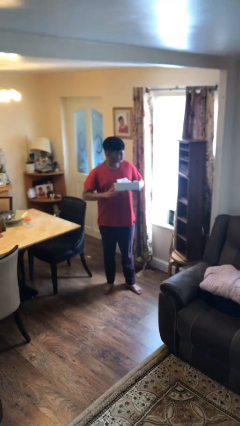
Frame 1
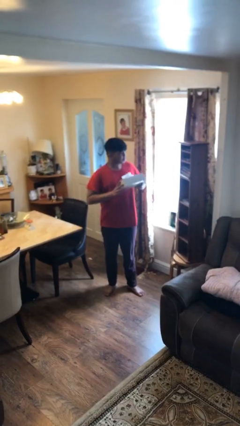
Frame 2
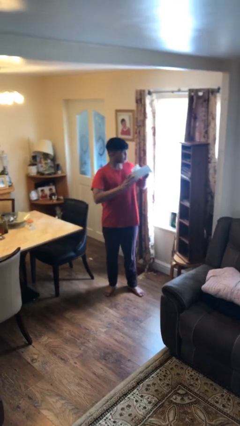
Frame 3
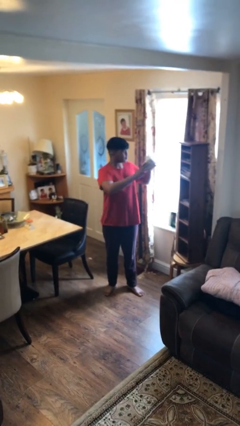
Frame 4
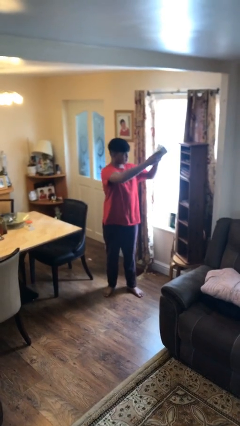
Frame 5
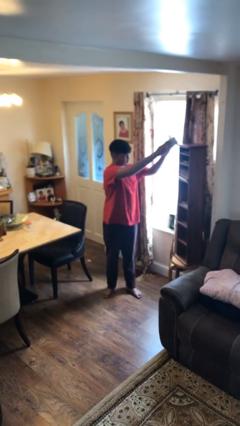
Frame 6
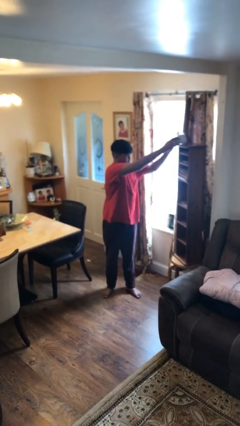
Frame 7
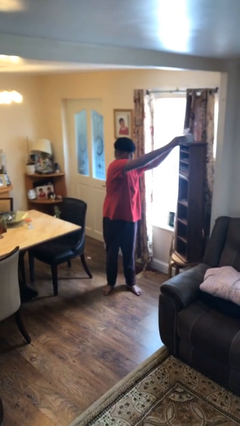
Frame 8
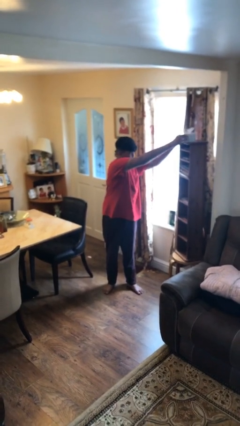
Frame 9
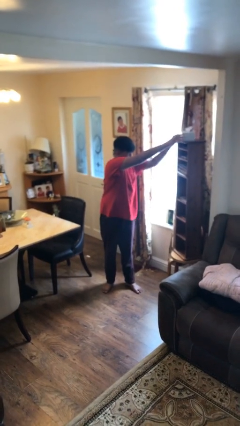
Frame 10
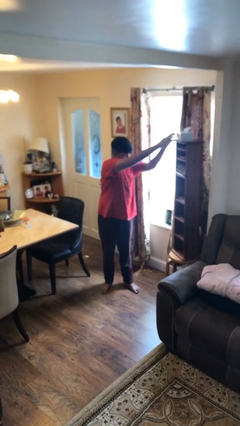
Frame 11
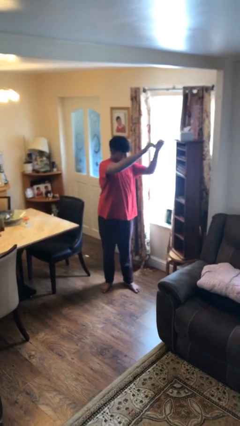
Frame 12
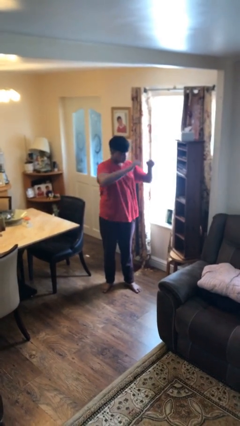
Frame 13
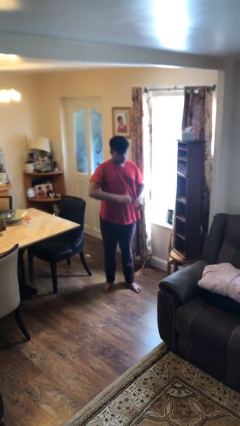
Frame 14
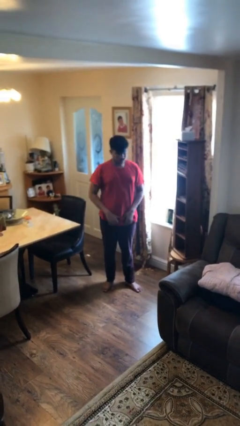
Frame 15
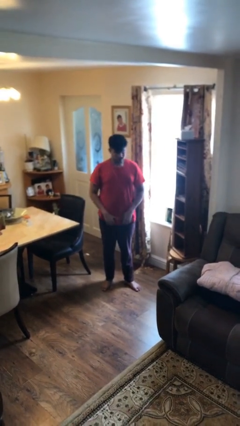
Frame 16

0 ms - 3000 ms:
person puts down object on shelf

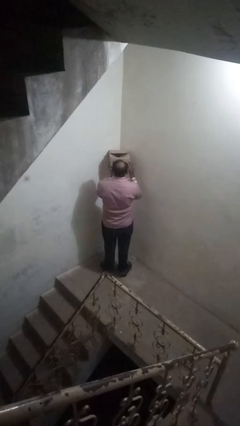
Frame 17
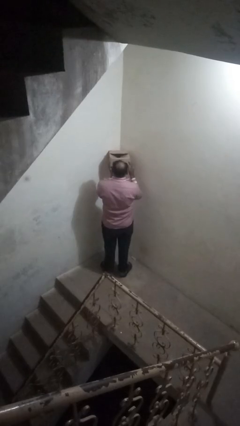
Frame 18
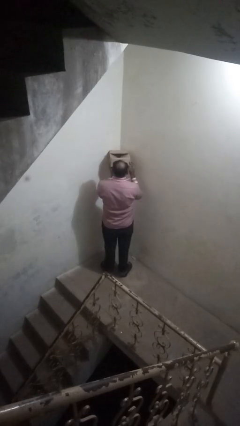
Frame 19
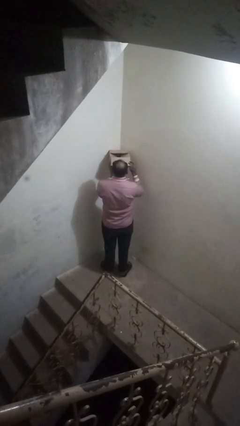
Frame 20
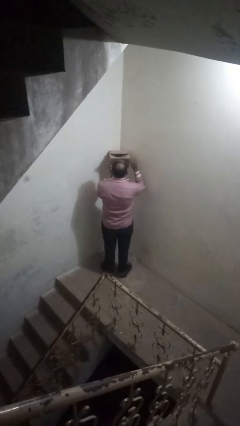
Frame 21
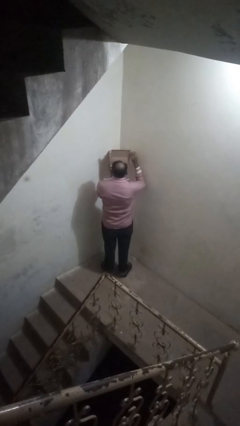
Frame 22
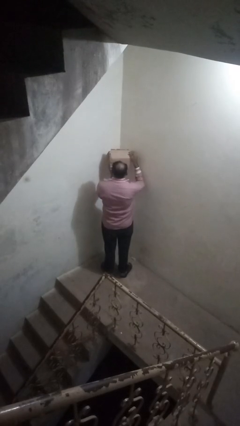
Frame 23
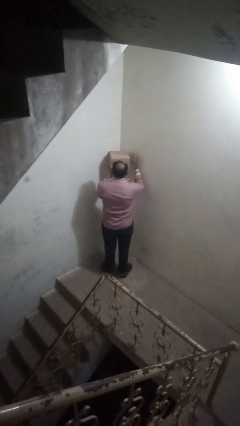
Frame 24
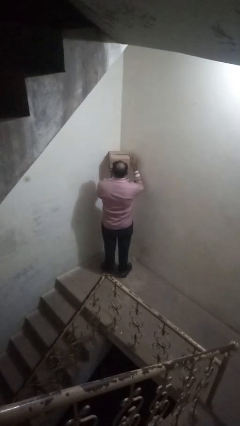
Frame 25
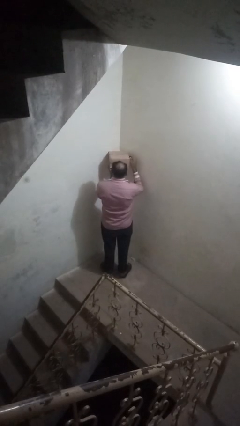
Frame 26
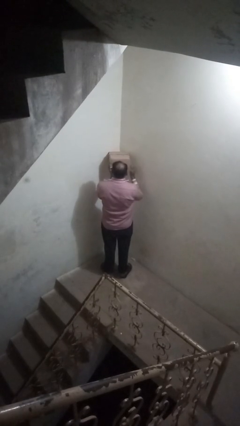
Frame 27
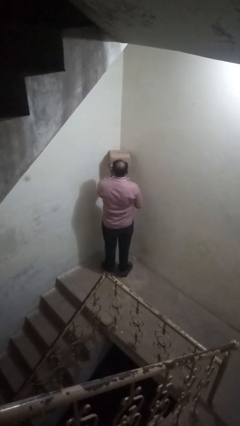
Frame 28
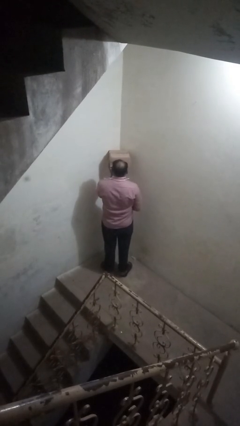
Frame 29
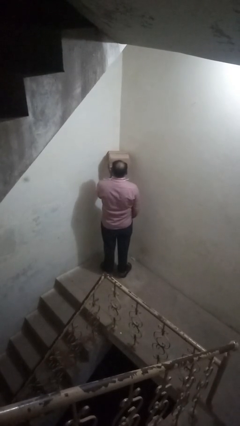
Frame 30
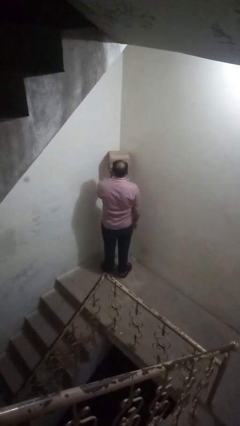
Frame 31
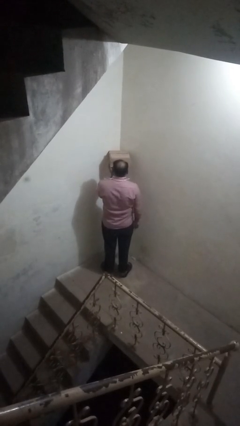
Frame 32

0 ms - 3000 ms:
person closes mailbox

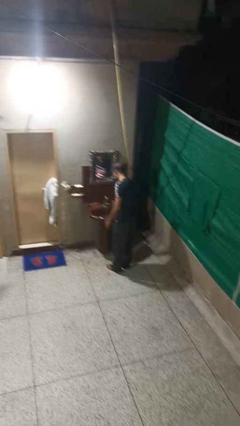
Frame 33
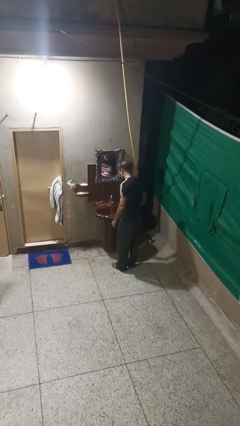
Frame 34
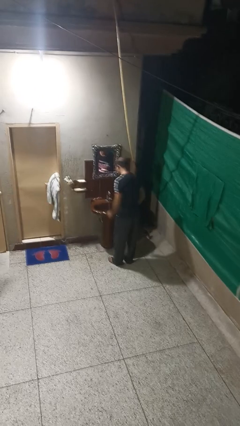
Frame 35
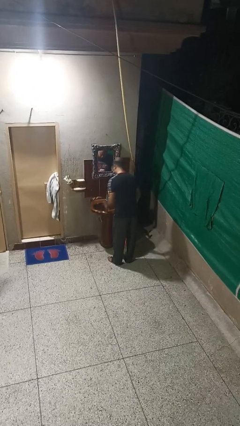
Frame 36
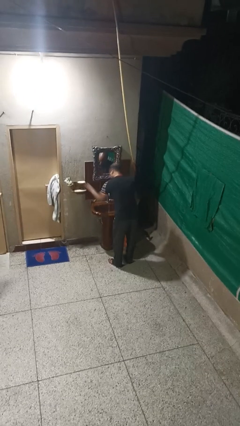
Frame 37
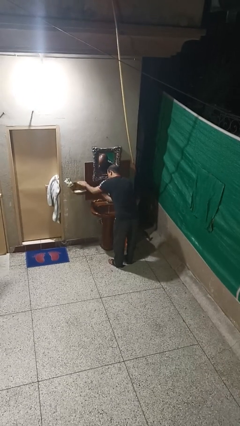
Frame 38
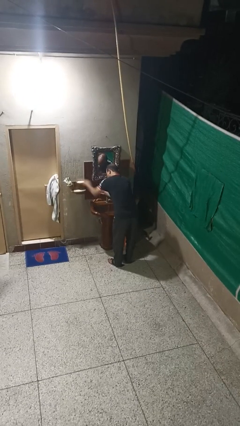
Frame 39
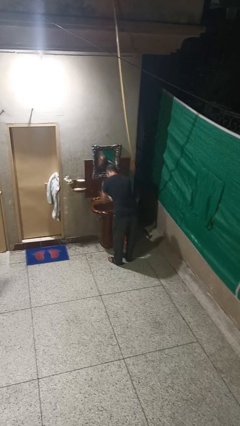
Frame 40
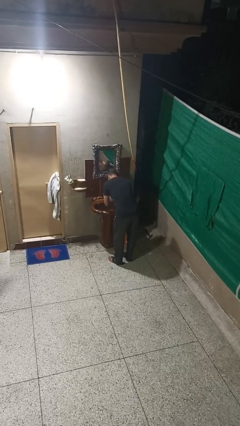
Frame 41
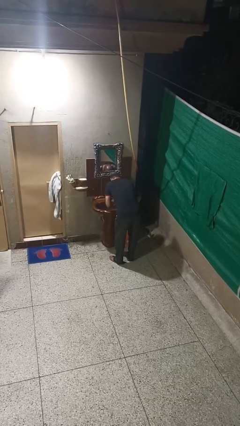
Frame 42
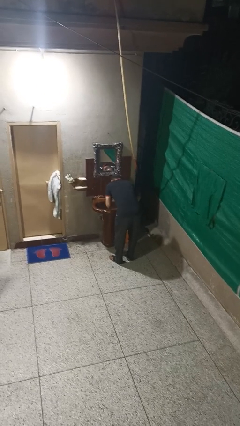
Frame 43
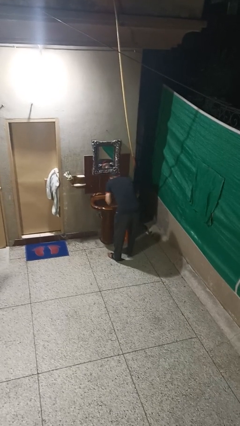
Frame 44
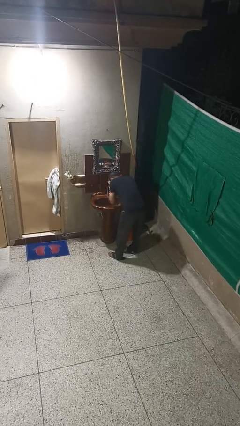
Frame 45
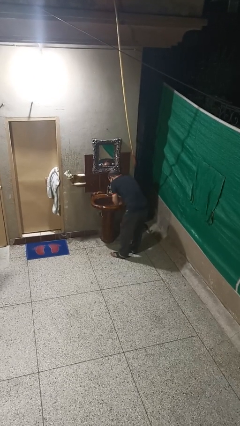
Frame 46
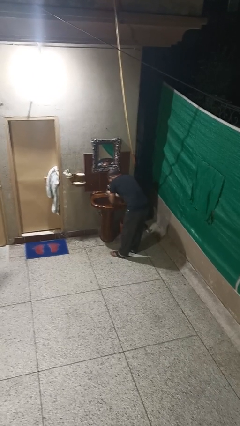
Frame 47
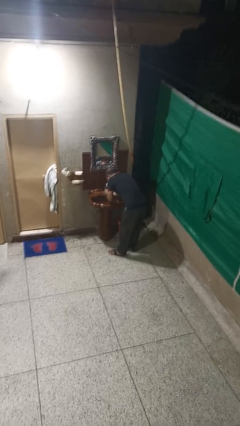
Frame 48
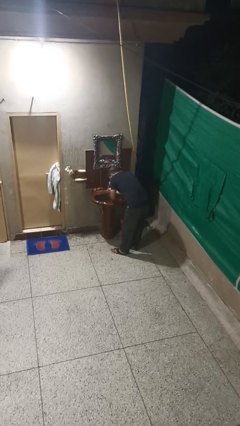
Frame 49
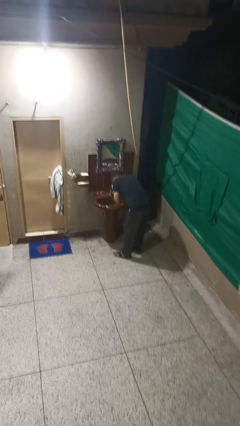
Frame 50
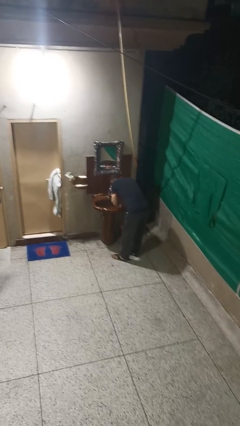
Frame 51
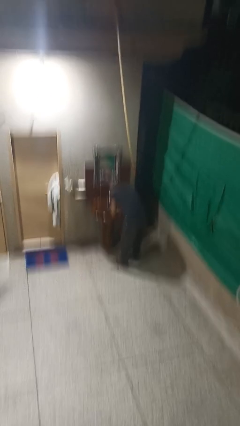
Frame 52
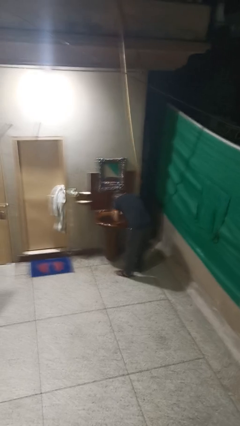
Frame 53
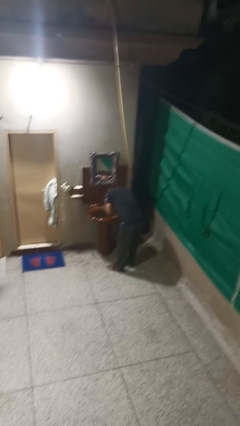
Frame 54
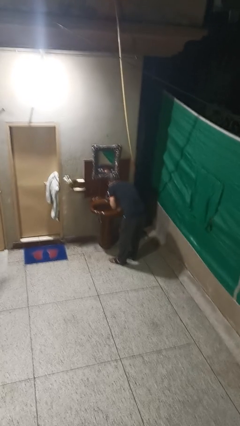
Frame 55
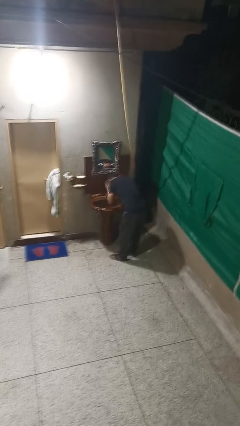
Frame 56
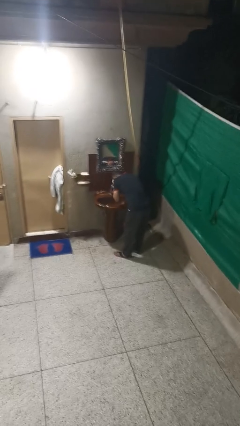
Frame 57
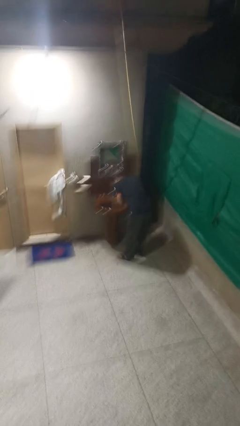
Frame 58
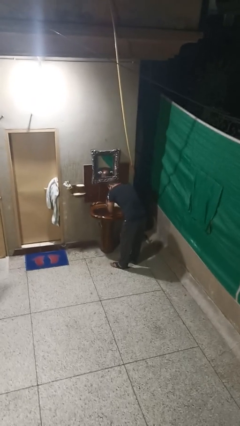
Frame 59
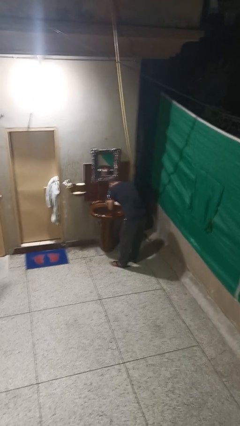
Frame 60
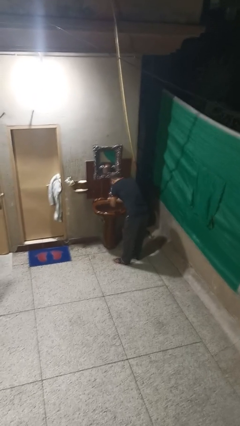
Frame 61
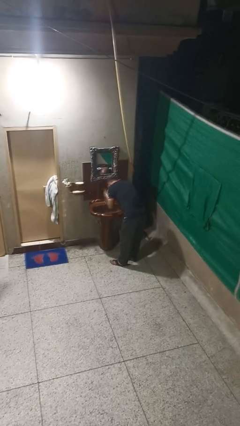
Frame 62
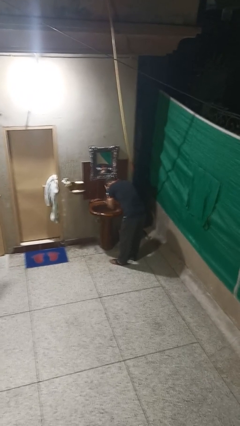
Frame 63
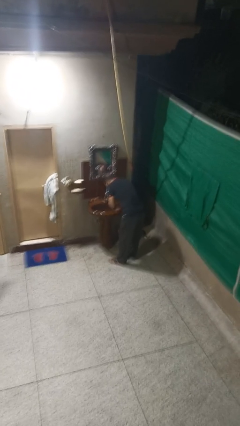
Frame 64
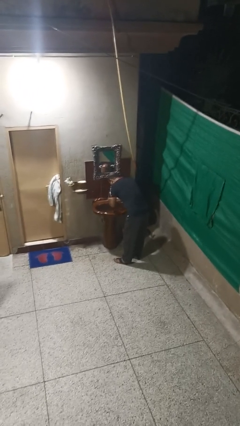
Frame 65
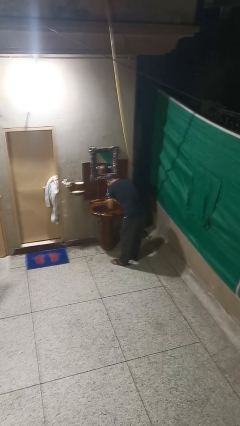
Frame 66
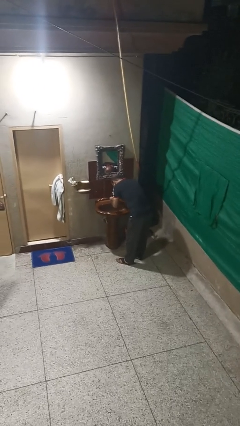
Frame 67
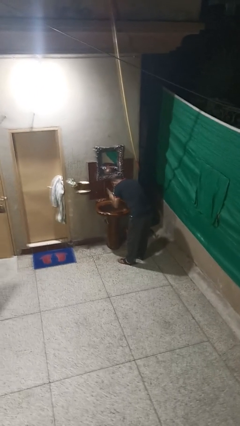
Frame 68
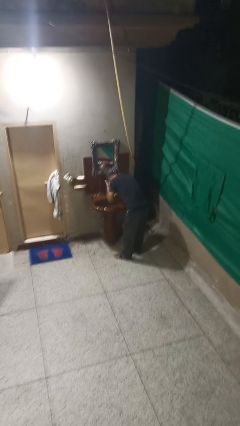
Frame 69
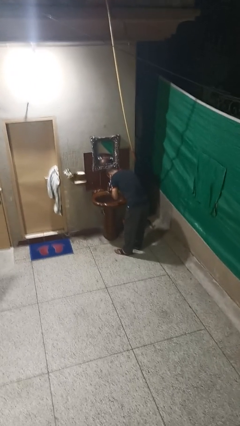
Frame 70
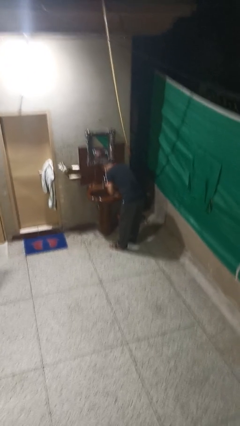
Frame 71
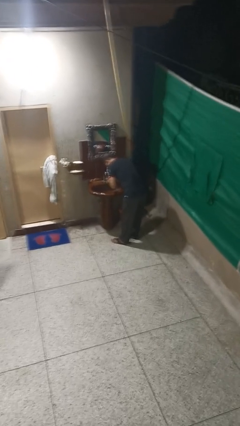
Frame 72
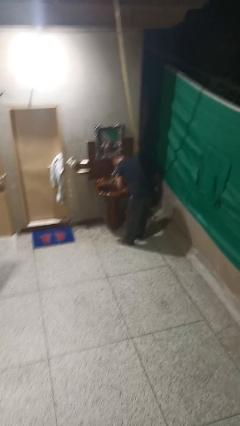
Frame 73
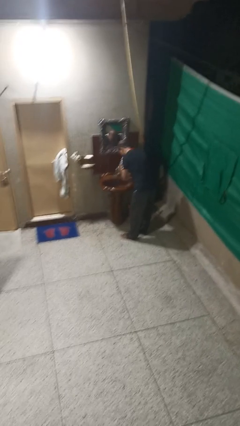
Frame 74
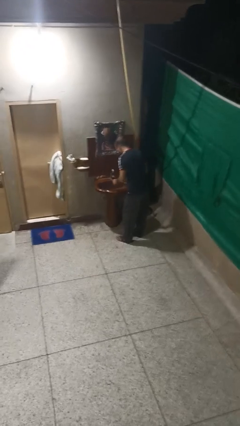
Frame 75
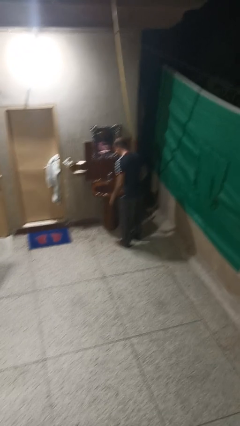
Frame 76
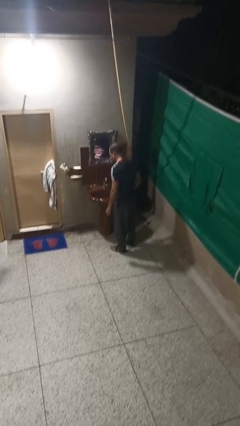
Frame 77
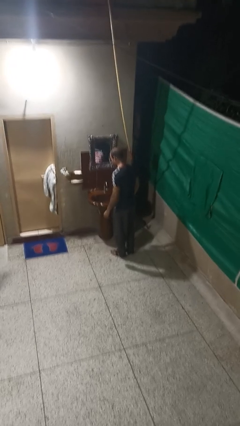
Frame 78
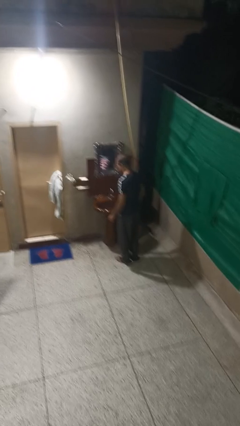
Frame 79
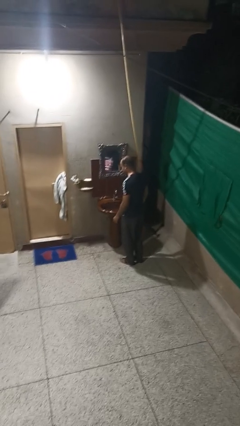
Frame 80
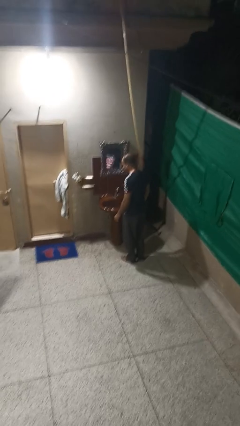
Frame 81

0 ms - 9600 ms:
person washes face

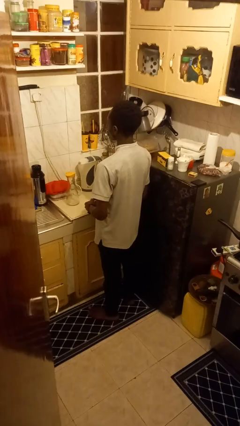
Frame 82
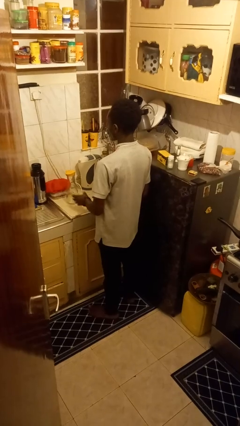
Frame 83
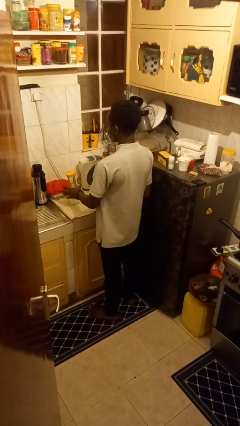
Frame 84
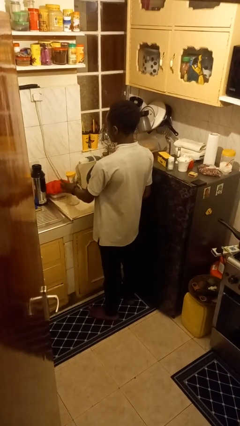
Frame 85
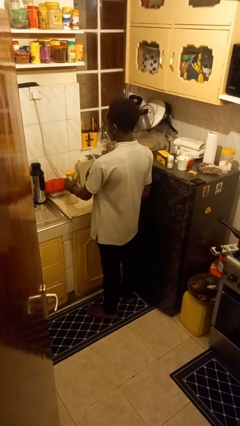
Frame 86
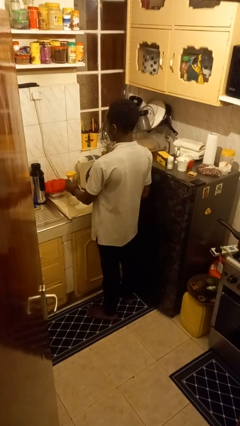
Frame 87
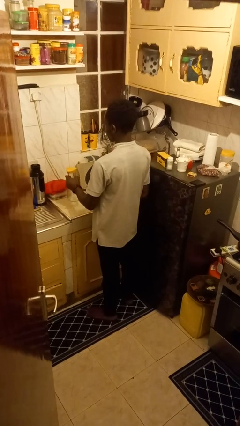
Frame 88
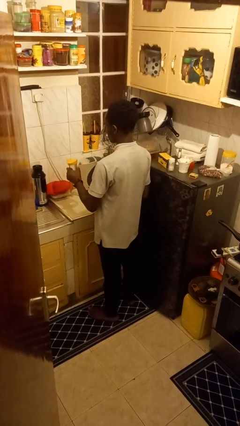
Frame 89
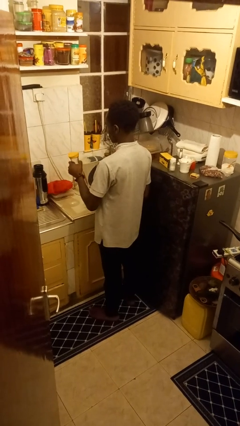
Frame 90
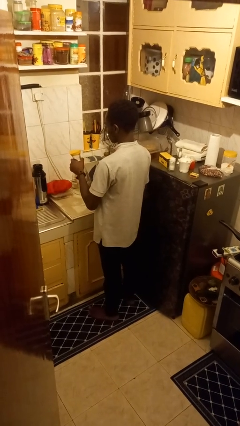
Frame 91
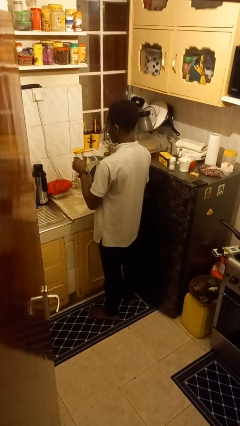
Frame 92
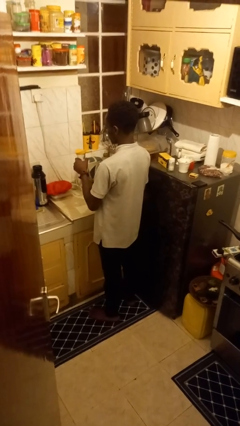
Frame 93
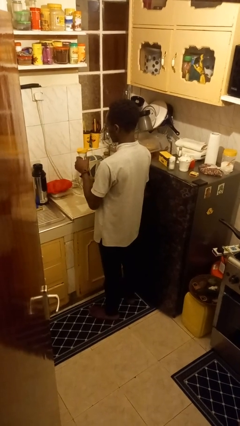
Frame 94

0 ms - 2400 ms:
person picks up object from countertop
